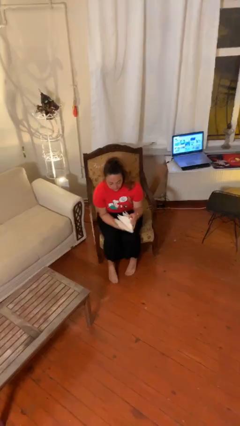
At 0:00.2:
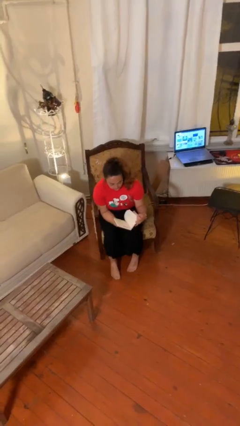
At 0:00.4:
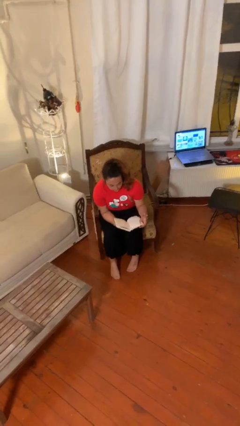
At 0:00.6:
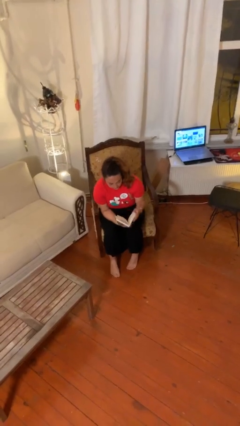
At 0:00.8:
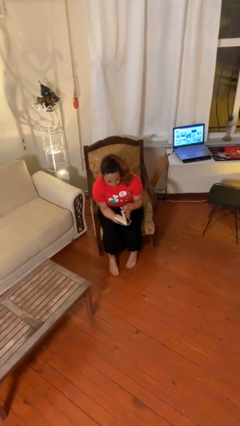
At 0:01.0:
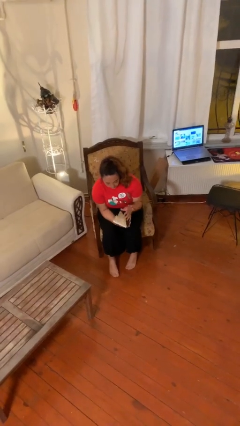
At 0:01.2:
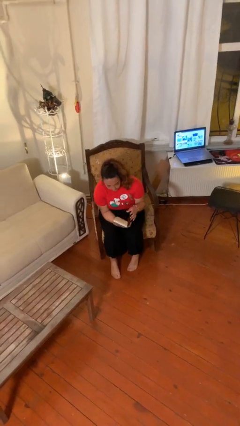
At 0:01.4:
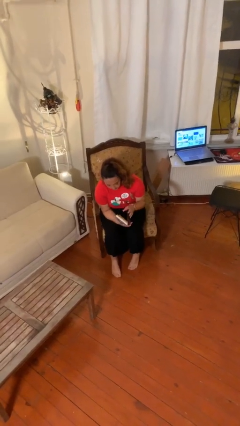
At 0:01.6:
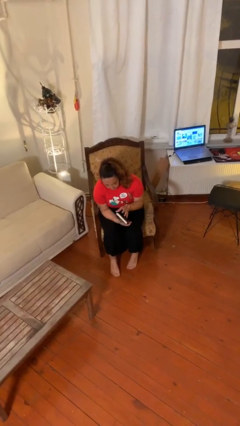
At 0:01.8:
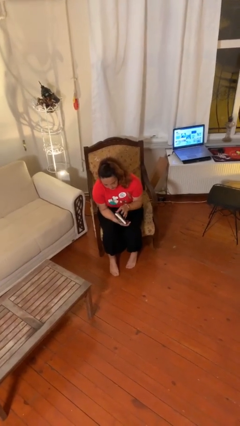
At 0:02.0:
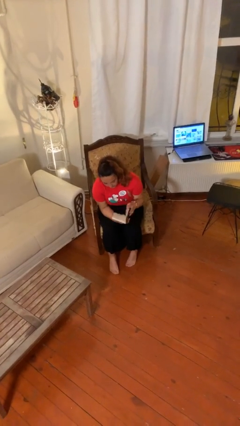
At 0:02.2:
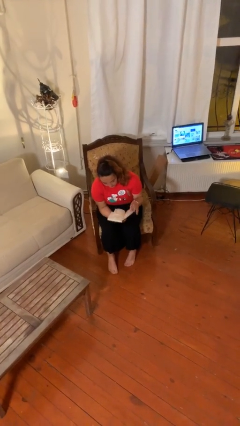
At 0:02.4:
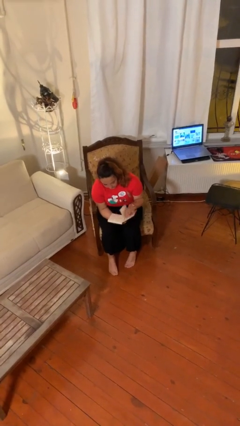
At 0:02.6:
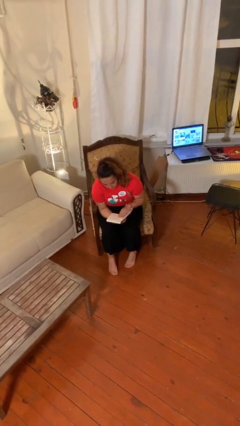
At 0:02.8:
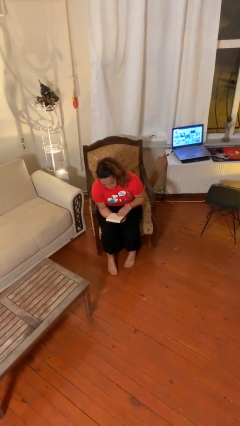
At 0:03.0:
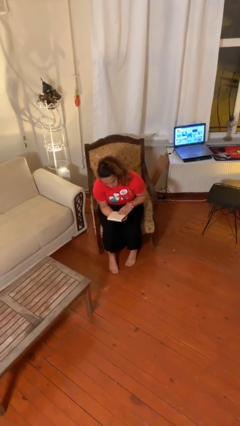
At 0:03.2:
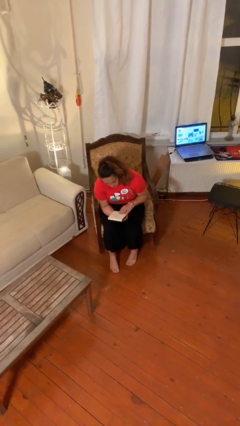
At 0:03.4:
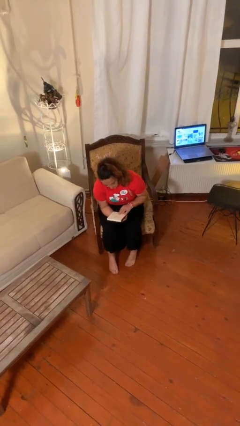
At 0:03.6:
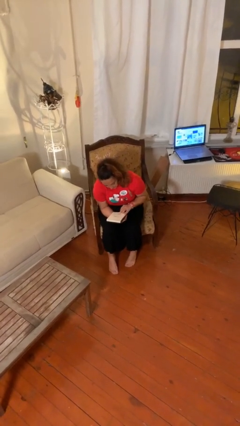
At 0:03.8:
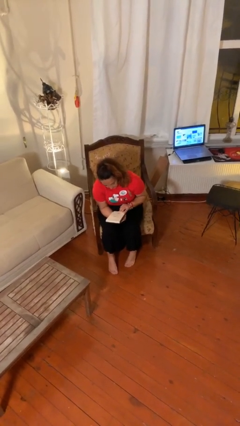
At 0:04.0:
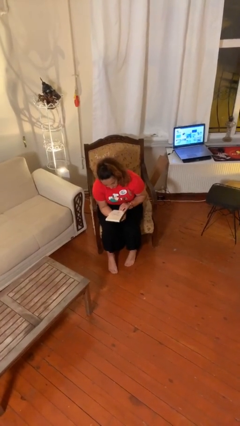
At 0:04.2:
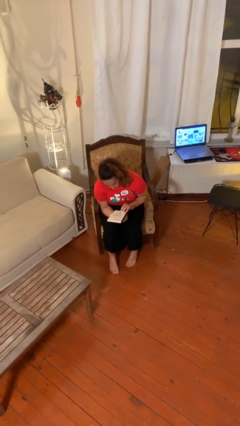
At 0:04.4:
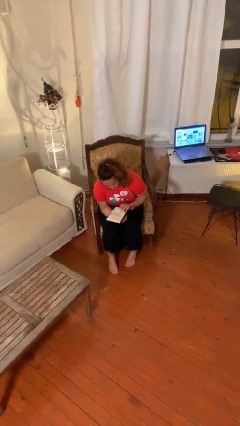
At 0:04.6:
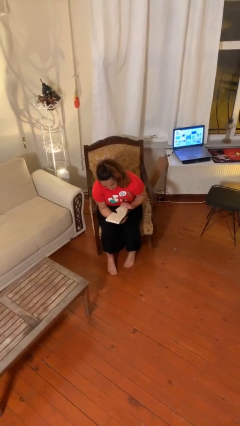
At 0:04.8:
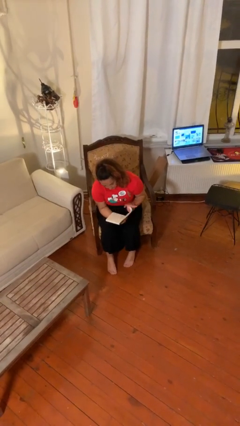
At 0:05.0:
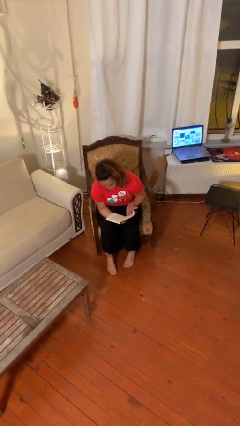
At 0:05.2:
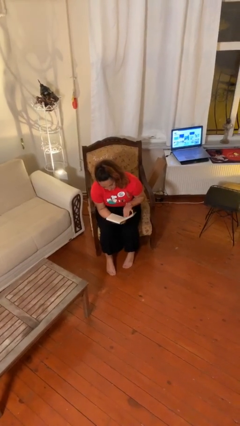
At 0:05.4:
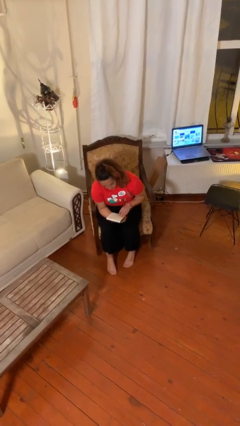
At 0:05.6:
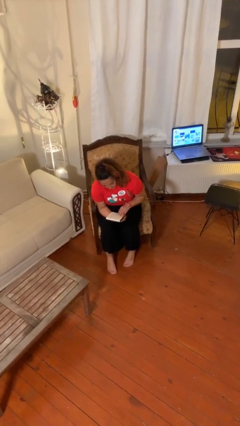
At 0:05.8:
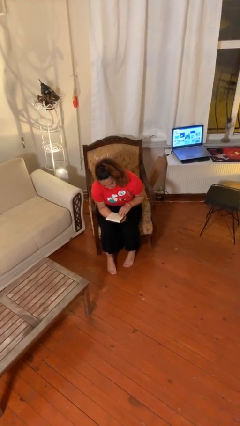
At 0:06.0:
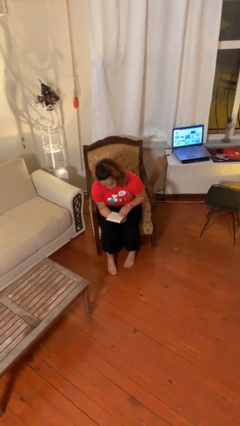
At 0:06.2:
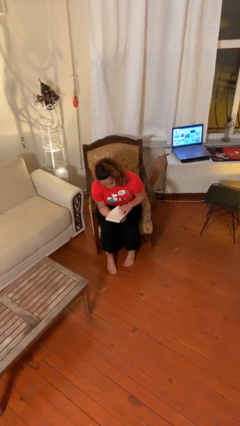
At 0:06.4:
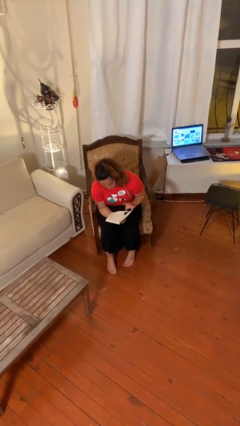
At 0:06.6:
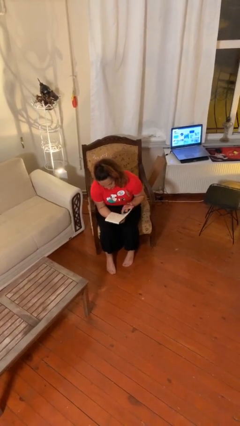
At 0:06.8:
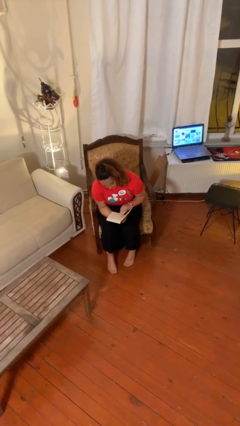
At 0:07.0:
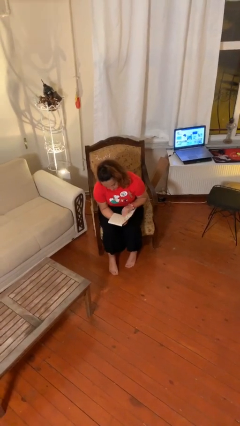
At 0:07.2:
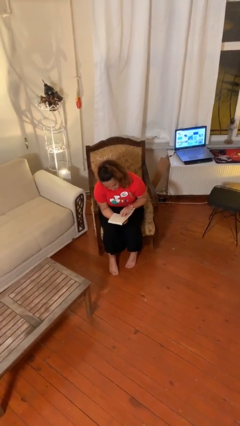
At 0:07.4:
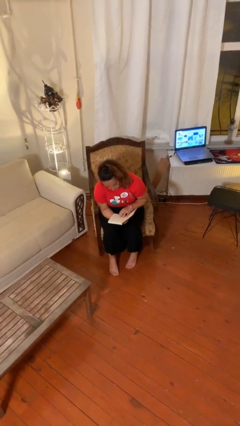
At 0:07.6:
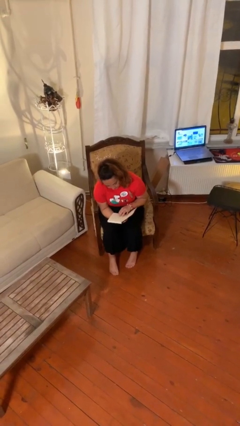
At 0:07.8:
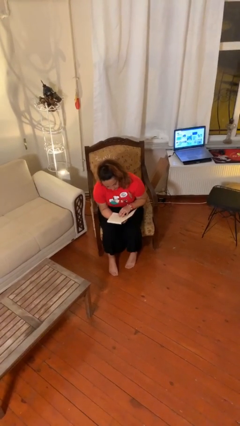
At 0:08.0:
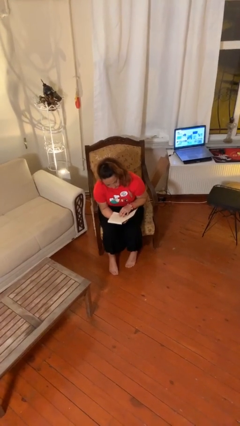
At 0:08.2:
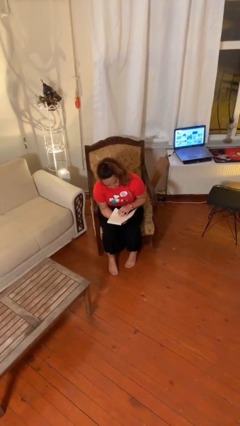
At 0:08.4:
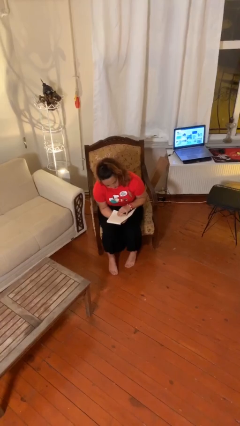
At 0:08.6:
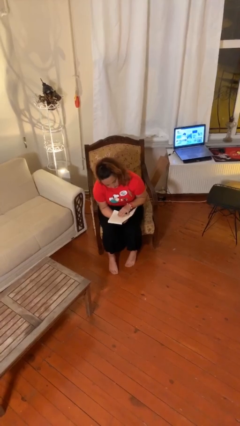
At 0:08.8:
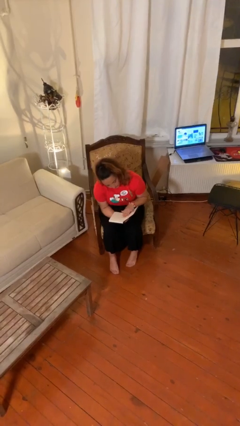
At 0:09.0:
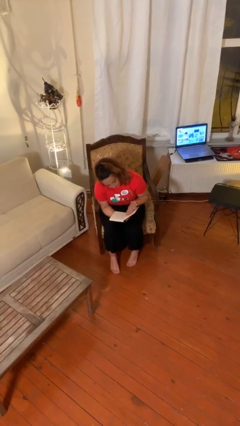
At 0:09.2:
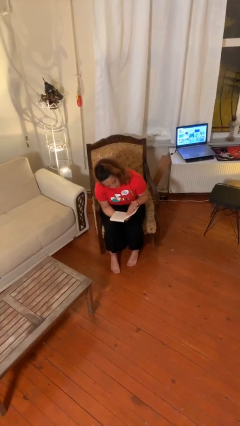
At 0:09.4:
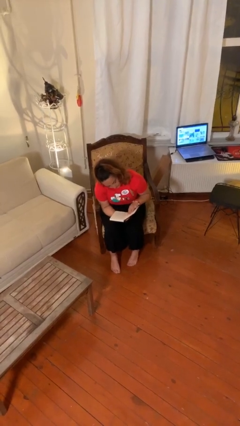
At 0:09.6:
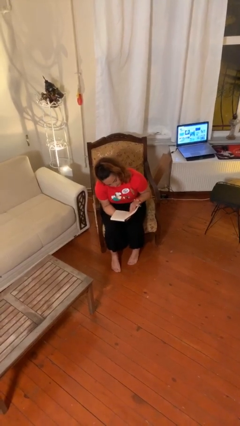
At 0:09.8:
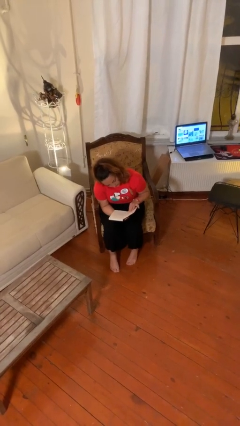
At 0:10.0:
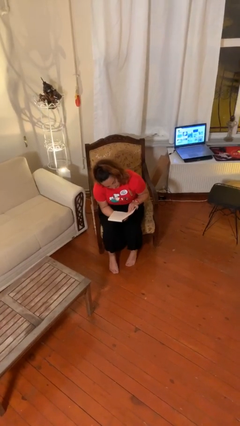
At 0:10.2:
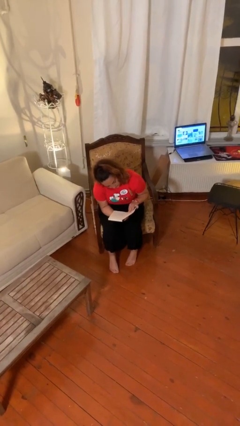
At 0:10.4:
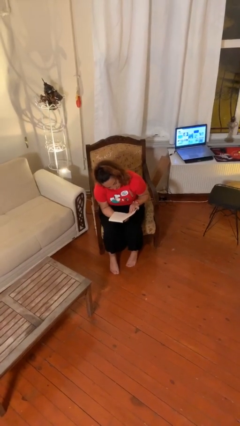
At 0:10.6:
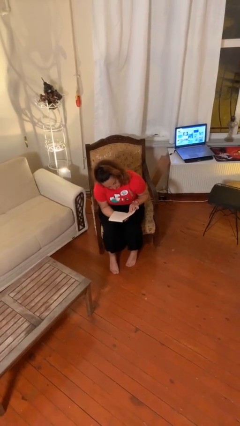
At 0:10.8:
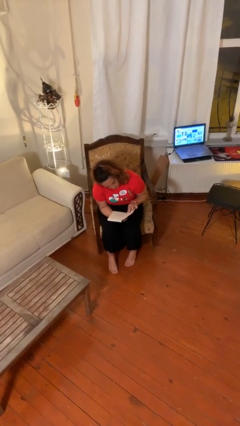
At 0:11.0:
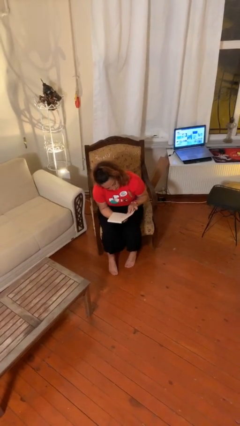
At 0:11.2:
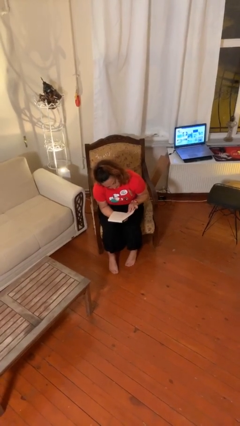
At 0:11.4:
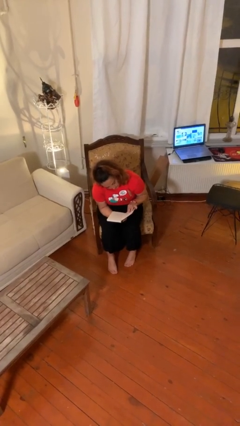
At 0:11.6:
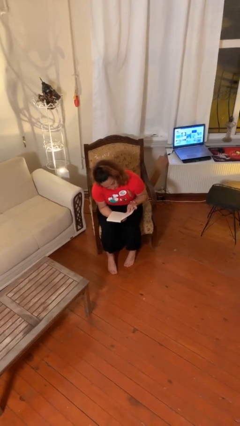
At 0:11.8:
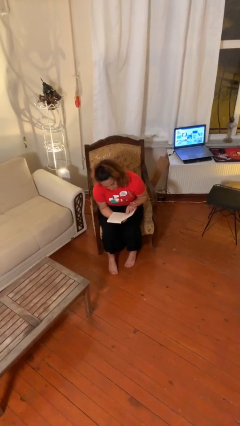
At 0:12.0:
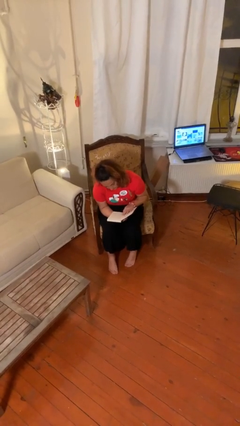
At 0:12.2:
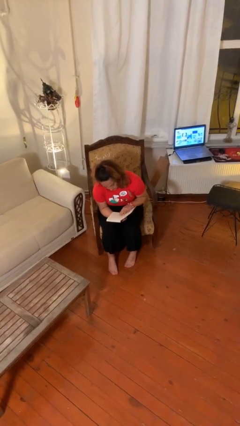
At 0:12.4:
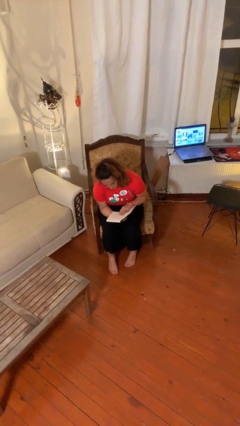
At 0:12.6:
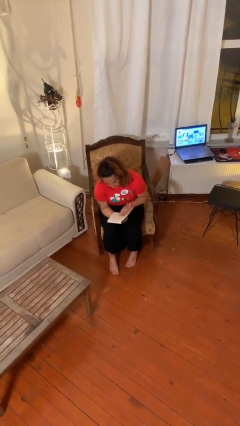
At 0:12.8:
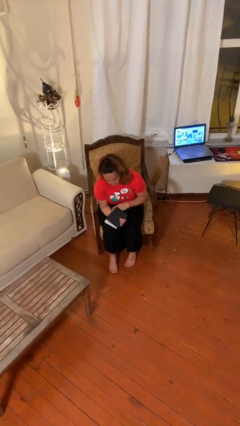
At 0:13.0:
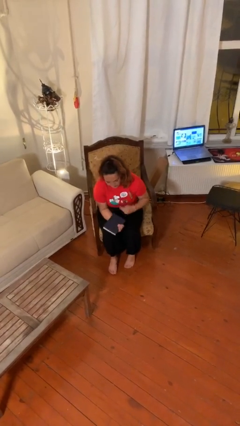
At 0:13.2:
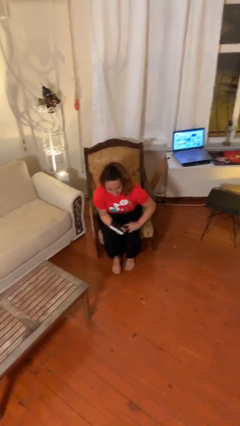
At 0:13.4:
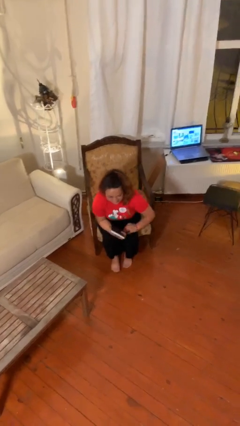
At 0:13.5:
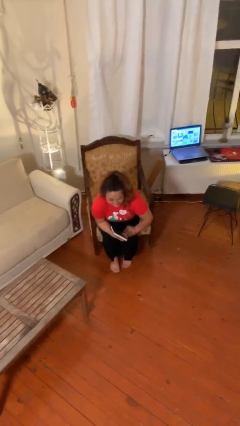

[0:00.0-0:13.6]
person reads document

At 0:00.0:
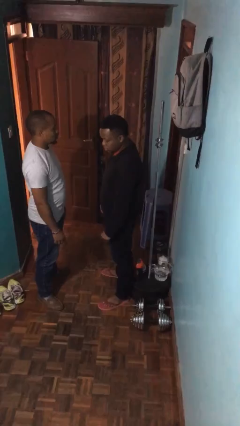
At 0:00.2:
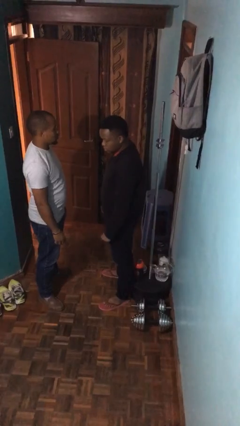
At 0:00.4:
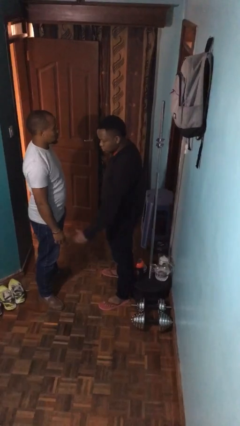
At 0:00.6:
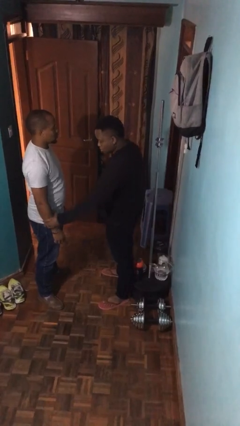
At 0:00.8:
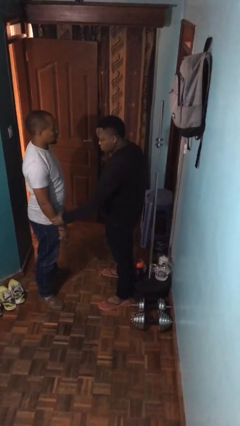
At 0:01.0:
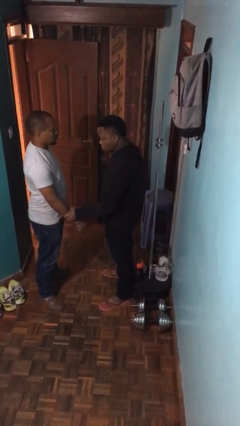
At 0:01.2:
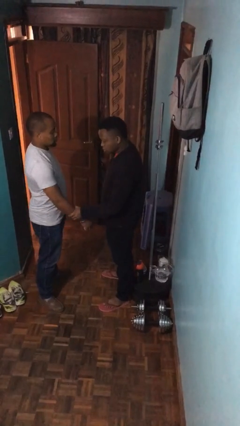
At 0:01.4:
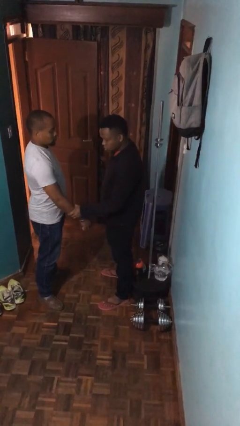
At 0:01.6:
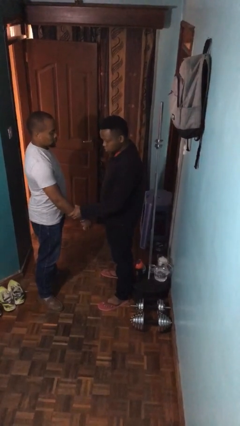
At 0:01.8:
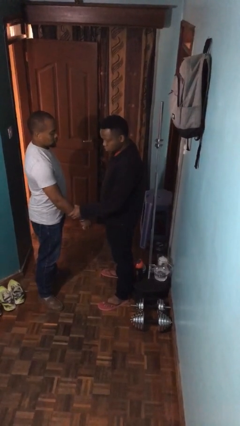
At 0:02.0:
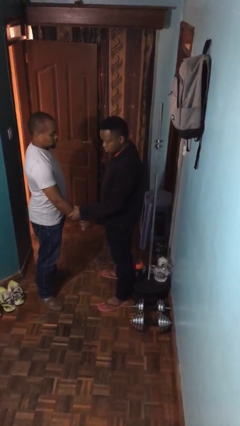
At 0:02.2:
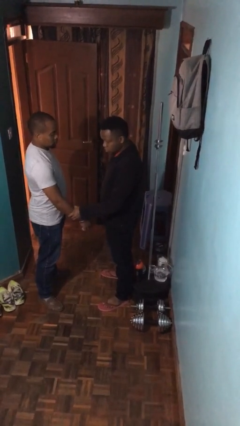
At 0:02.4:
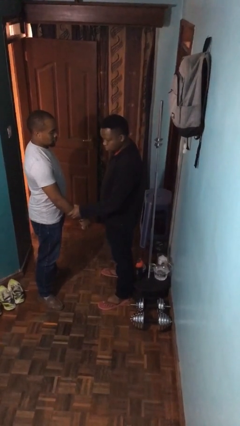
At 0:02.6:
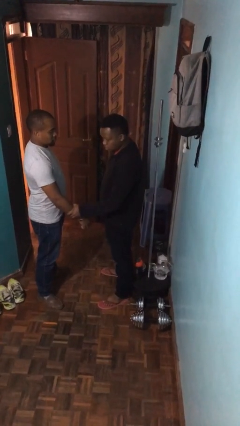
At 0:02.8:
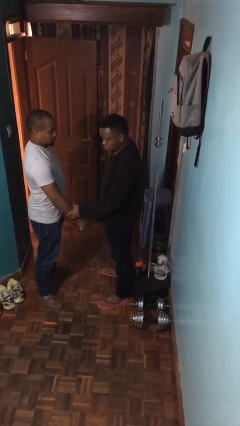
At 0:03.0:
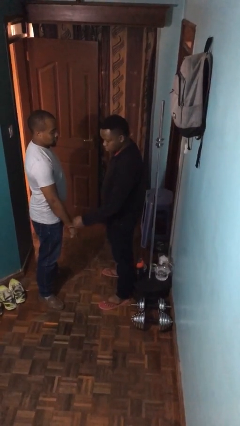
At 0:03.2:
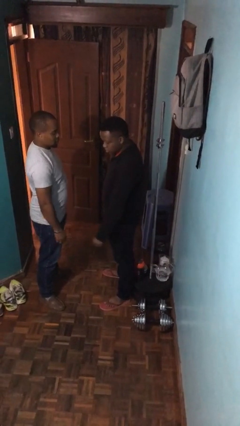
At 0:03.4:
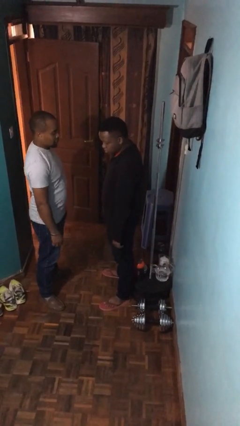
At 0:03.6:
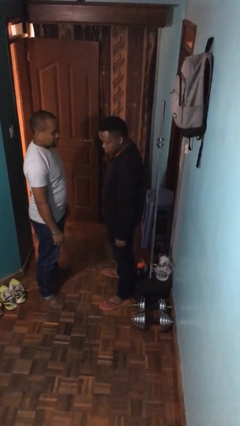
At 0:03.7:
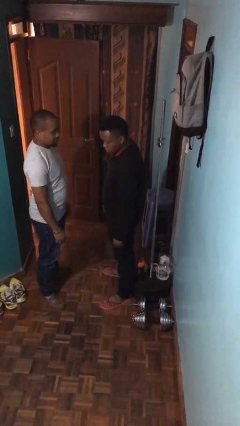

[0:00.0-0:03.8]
person grabs person by forearm

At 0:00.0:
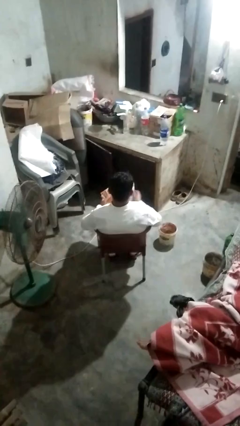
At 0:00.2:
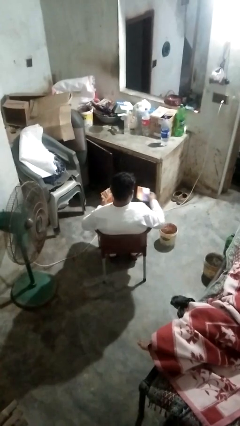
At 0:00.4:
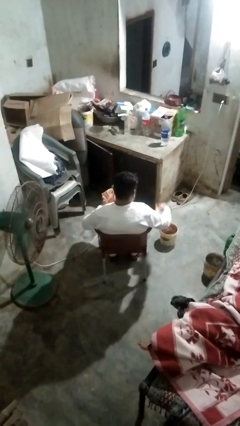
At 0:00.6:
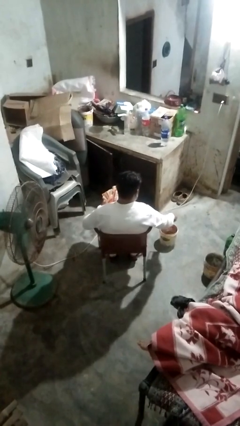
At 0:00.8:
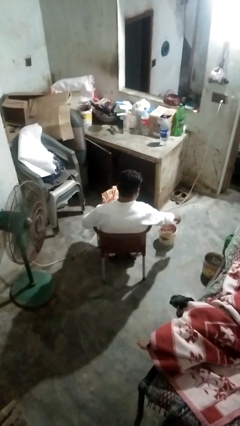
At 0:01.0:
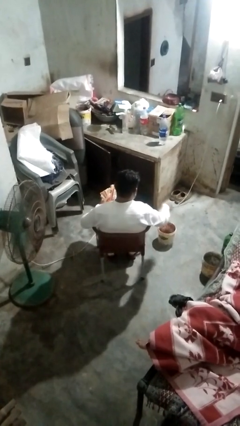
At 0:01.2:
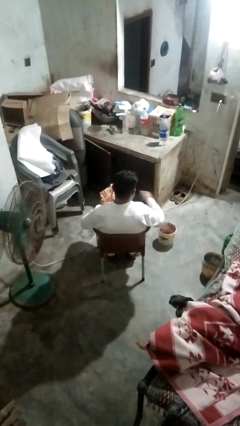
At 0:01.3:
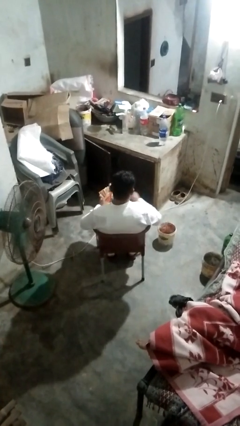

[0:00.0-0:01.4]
person discards trash
